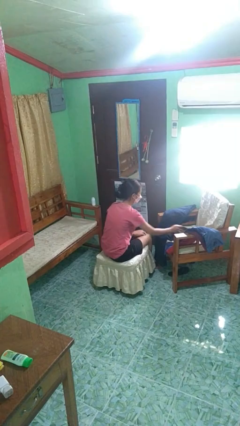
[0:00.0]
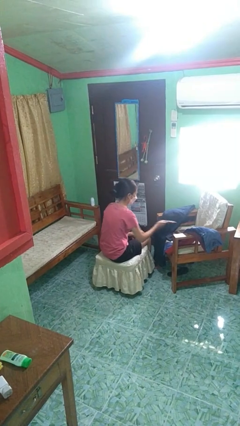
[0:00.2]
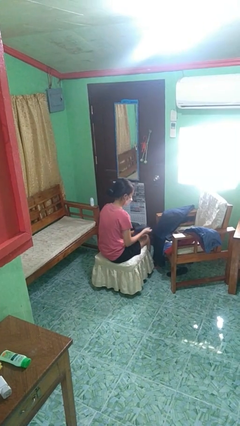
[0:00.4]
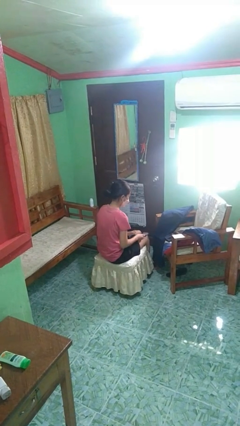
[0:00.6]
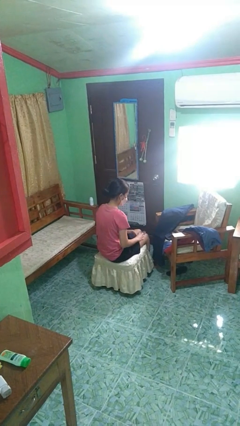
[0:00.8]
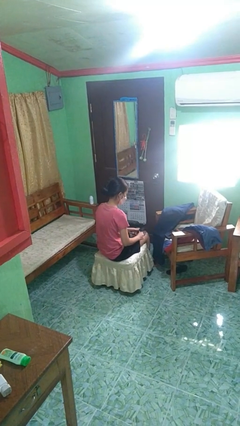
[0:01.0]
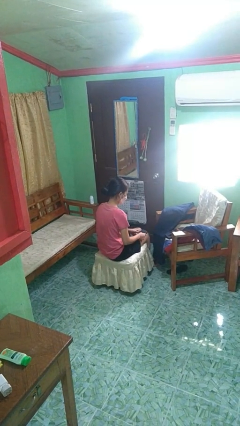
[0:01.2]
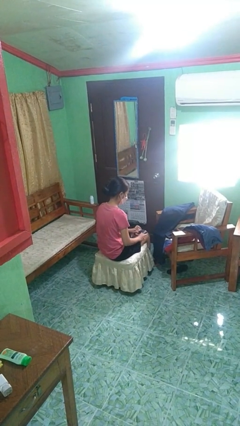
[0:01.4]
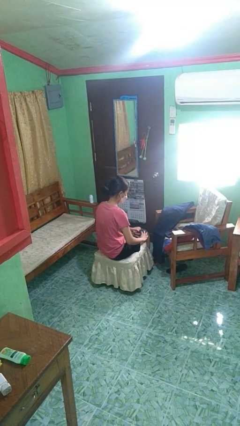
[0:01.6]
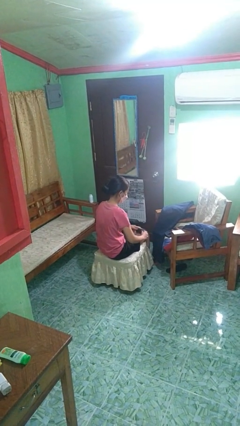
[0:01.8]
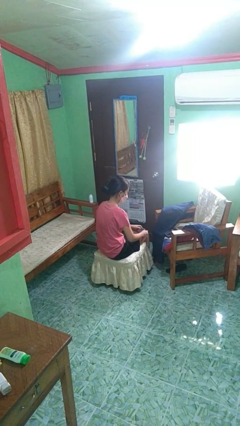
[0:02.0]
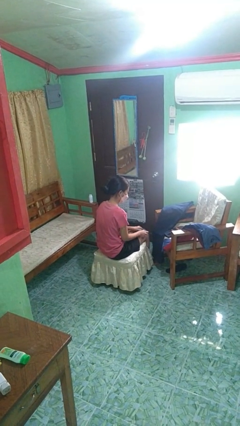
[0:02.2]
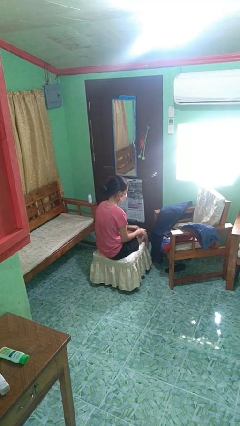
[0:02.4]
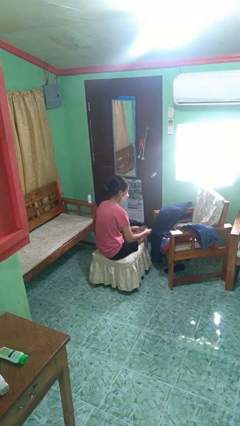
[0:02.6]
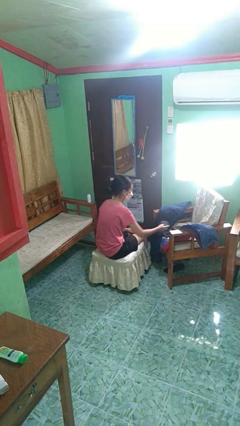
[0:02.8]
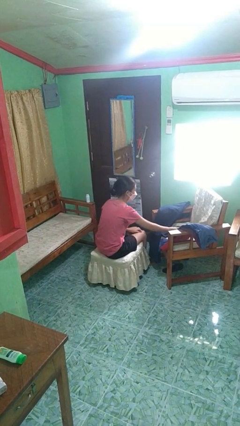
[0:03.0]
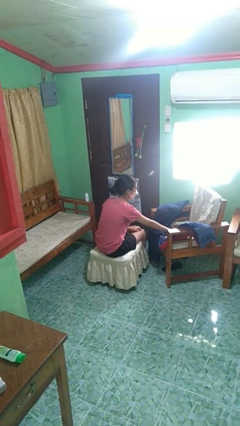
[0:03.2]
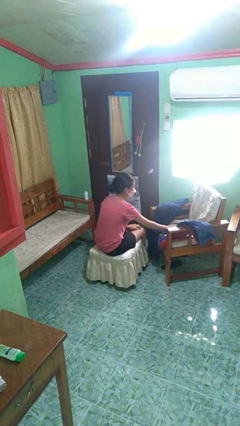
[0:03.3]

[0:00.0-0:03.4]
person folds socks

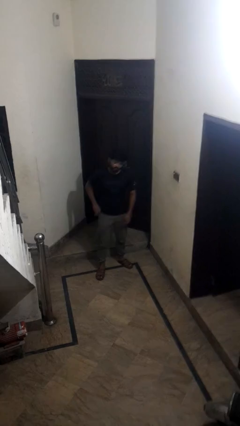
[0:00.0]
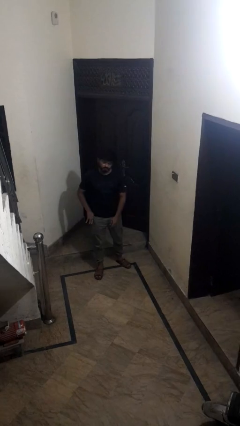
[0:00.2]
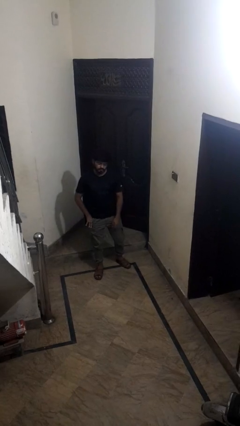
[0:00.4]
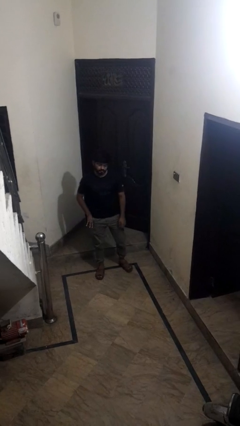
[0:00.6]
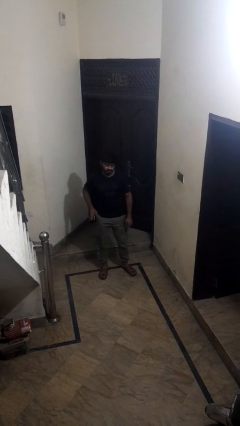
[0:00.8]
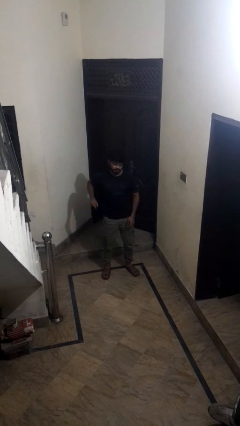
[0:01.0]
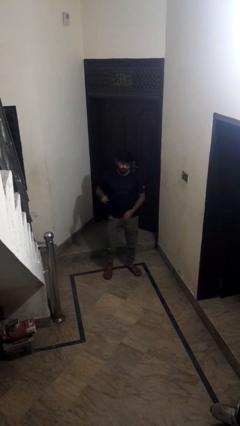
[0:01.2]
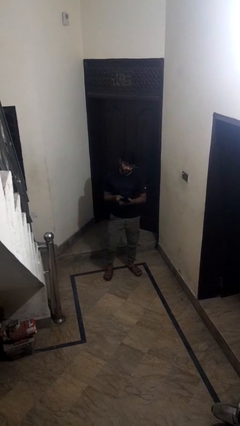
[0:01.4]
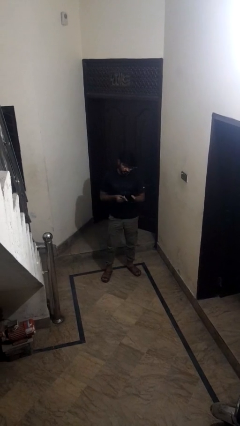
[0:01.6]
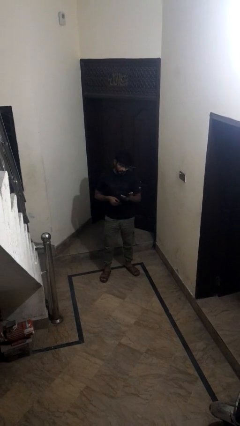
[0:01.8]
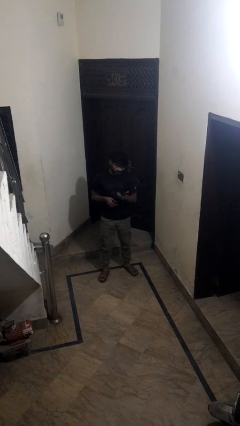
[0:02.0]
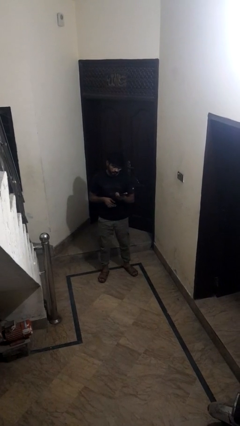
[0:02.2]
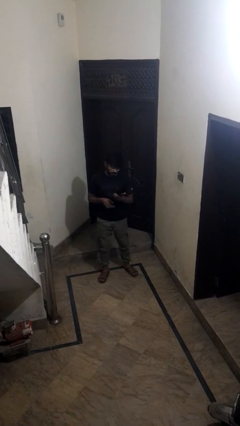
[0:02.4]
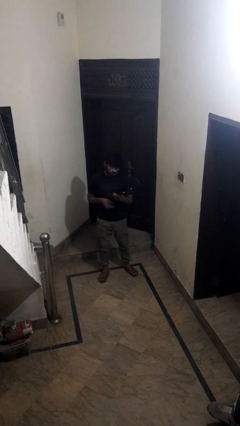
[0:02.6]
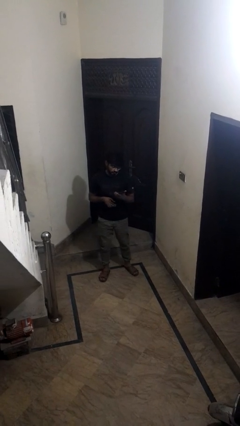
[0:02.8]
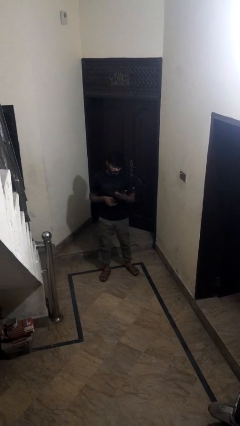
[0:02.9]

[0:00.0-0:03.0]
person takes phone from pocket

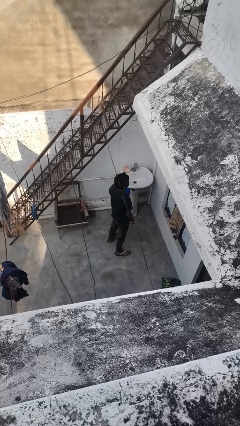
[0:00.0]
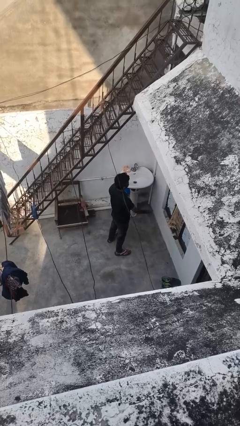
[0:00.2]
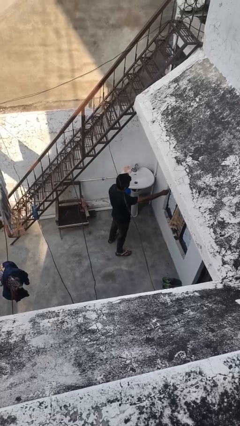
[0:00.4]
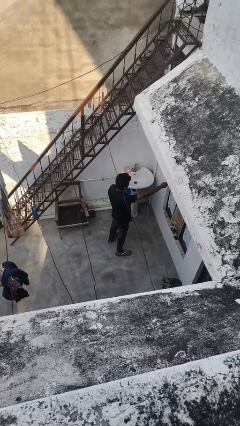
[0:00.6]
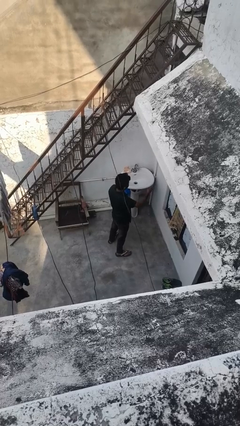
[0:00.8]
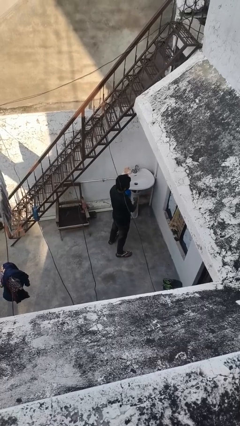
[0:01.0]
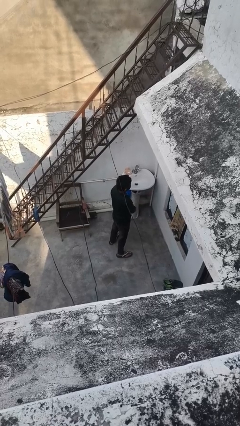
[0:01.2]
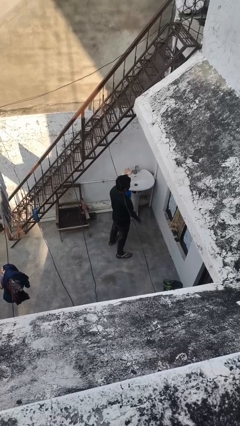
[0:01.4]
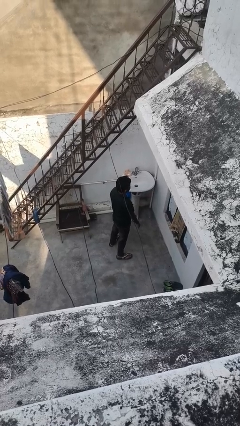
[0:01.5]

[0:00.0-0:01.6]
person gestures behind me

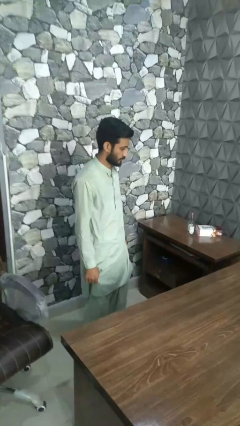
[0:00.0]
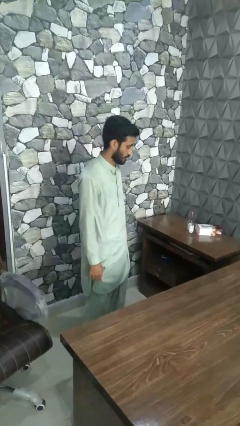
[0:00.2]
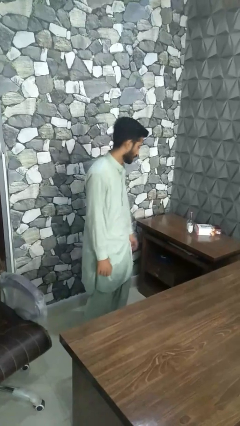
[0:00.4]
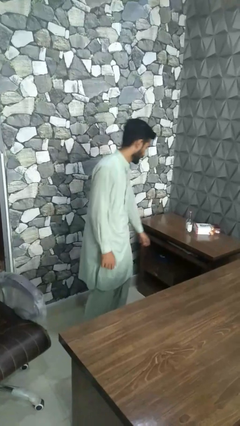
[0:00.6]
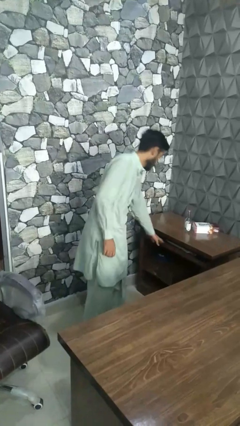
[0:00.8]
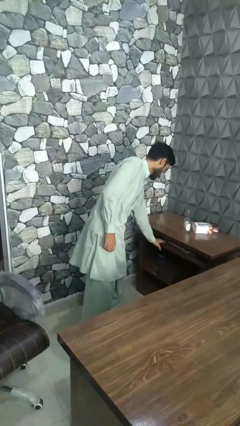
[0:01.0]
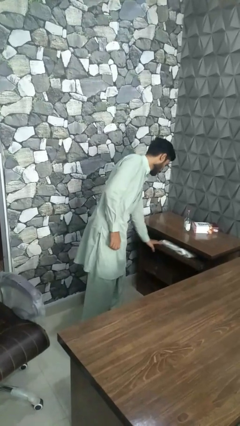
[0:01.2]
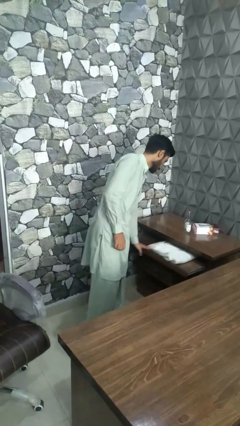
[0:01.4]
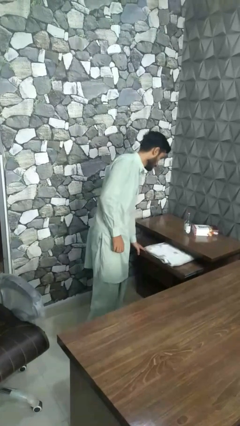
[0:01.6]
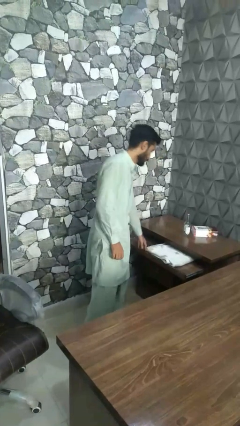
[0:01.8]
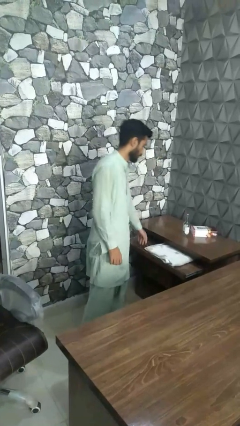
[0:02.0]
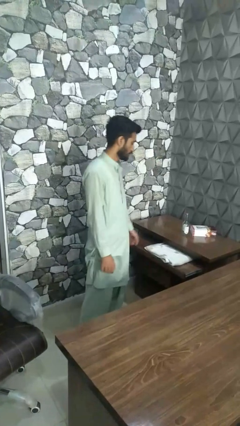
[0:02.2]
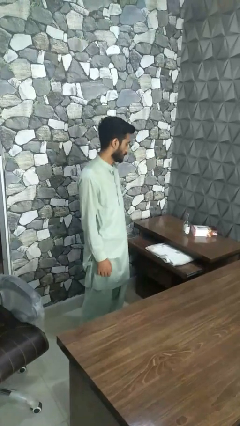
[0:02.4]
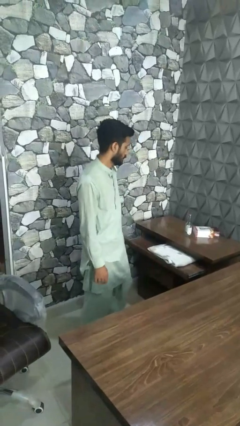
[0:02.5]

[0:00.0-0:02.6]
person opens dresser drawer

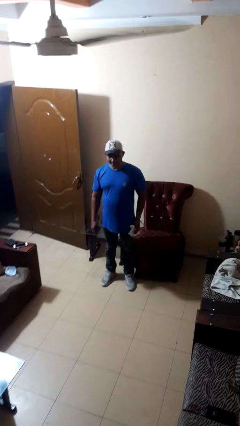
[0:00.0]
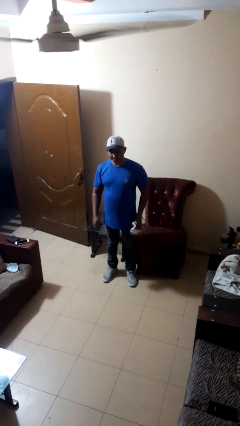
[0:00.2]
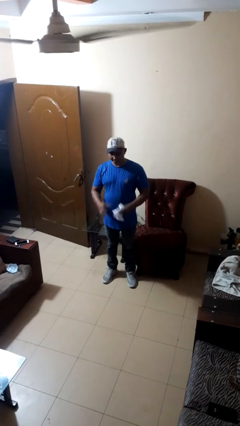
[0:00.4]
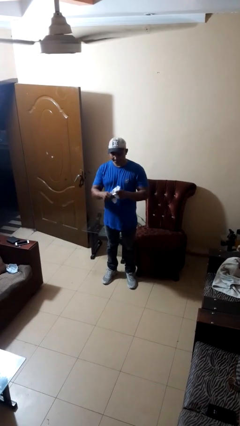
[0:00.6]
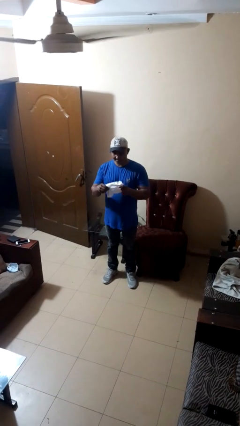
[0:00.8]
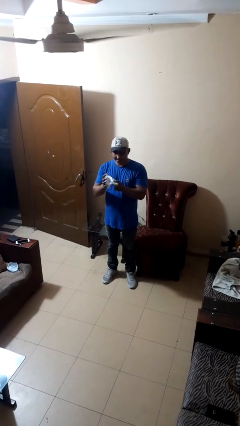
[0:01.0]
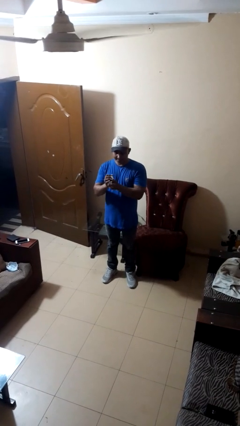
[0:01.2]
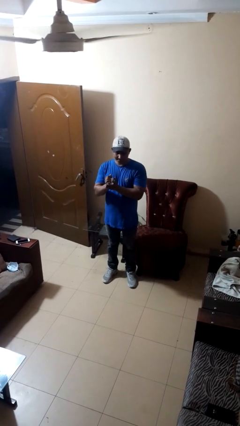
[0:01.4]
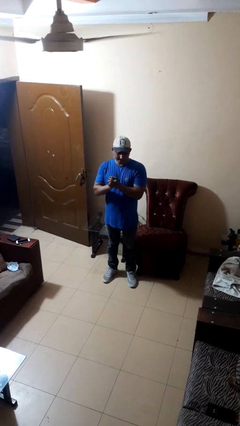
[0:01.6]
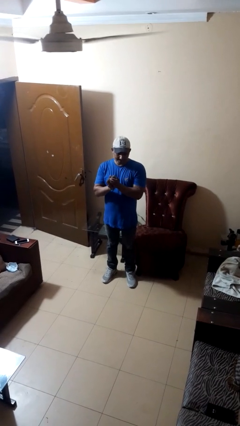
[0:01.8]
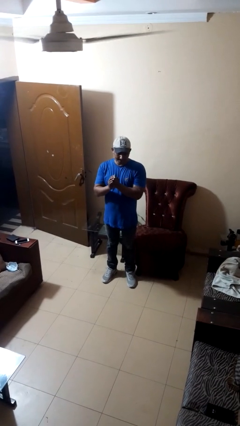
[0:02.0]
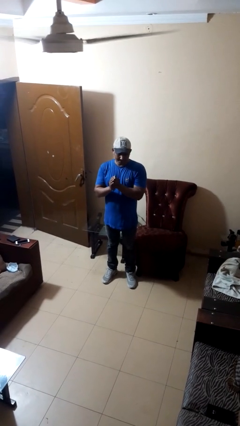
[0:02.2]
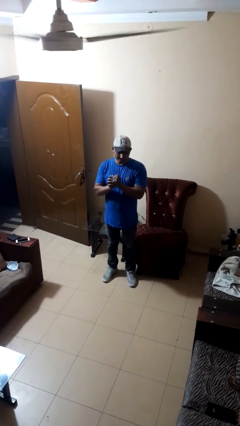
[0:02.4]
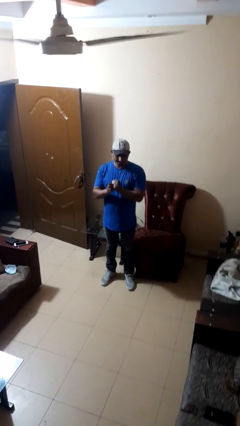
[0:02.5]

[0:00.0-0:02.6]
person crumples paper

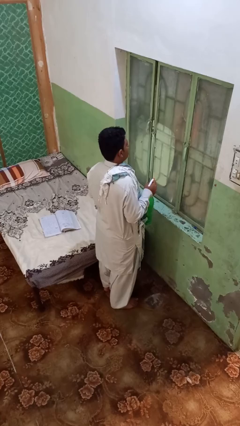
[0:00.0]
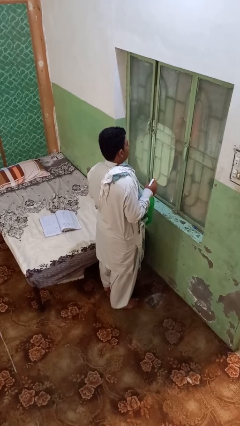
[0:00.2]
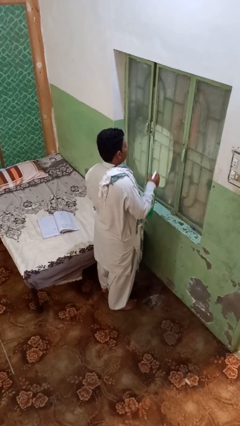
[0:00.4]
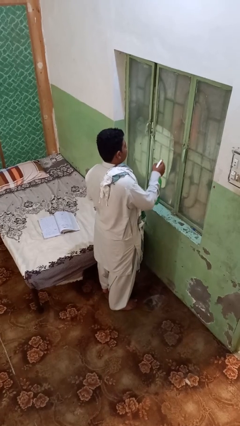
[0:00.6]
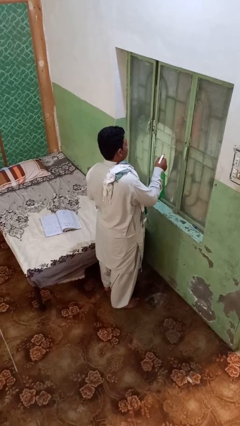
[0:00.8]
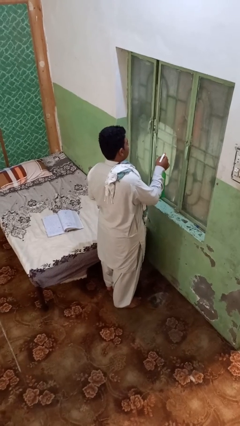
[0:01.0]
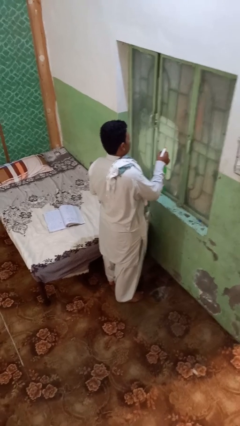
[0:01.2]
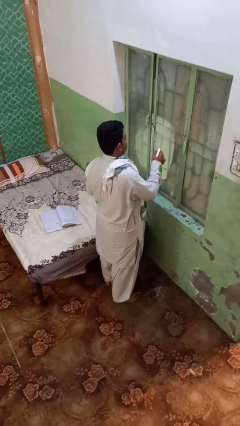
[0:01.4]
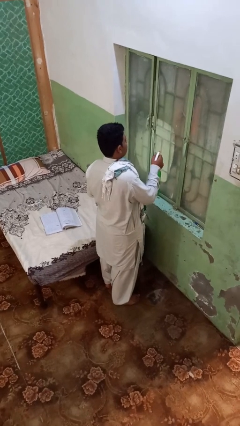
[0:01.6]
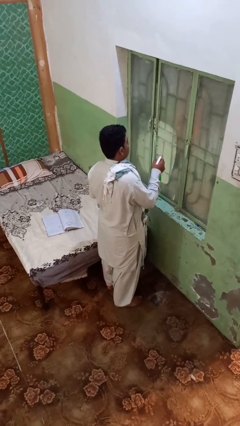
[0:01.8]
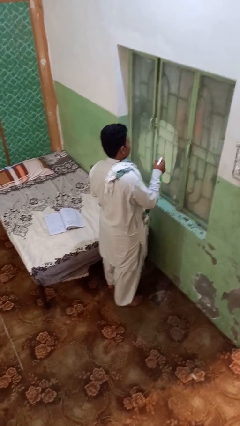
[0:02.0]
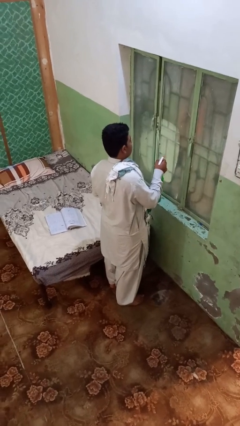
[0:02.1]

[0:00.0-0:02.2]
person sprays from bottle

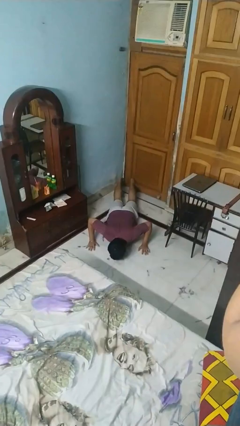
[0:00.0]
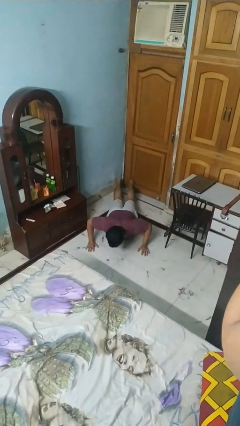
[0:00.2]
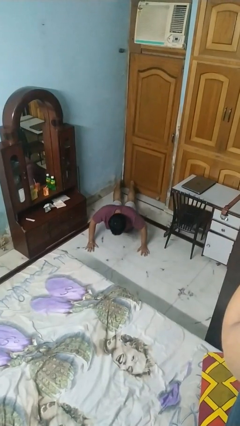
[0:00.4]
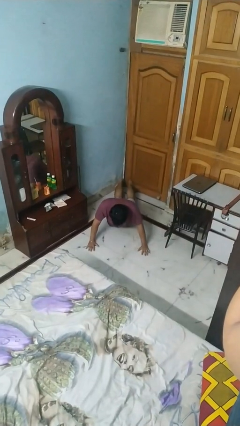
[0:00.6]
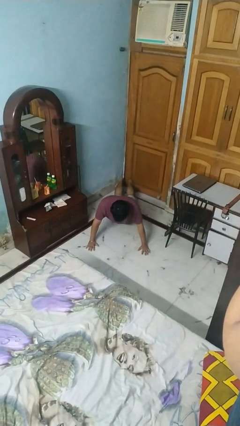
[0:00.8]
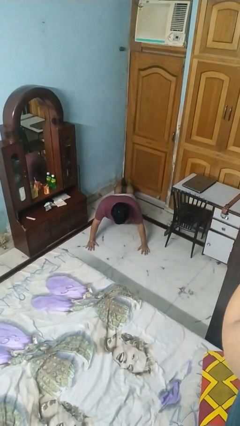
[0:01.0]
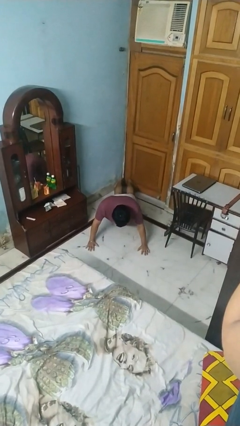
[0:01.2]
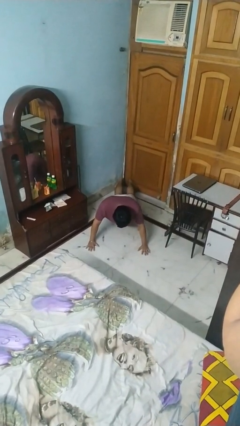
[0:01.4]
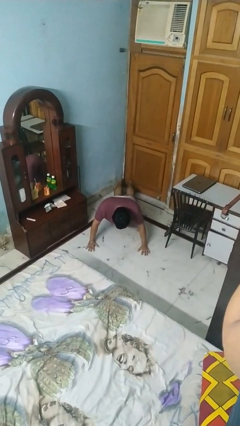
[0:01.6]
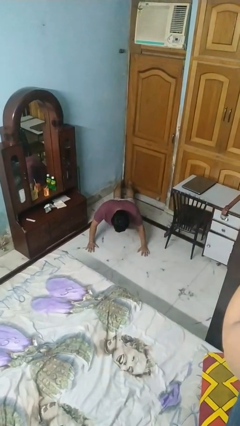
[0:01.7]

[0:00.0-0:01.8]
person exercises with pushup
